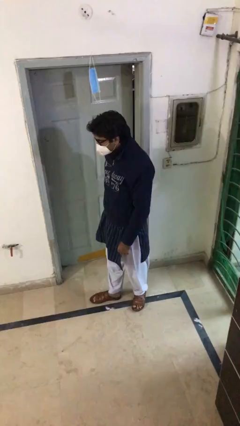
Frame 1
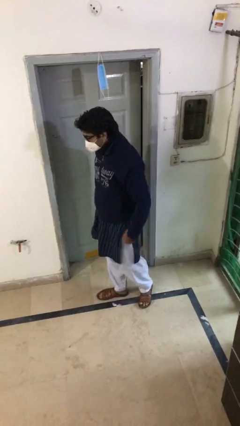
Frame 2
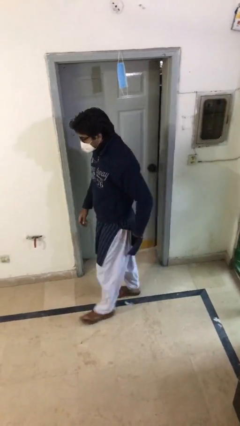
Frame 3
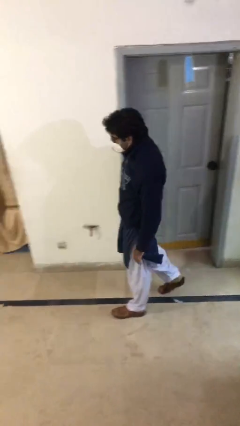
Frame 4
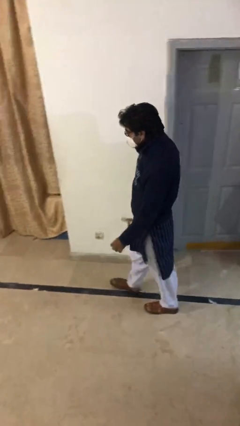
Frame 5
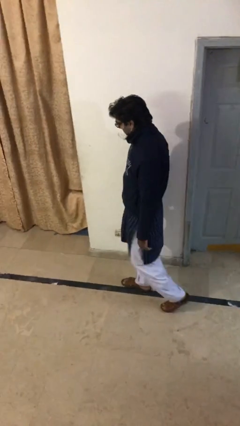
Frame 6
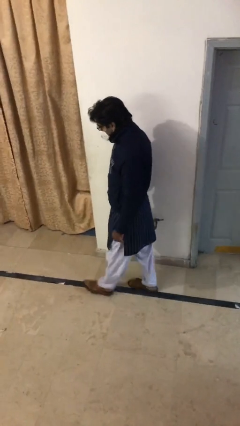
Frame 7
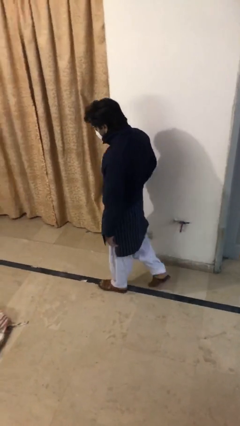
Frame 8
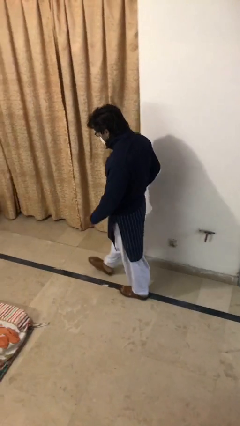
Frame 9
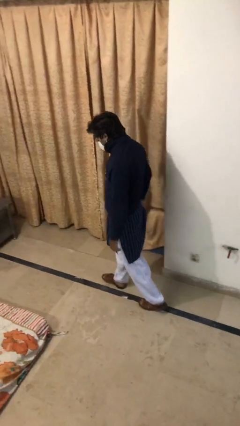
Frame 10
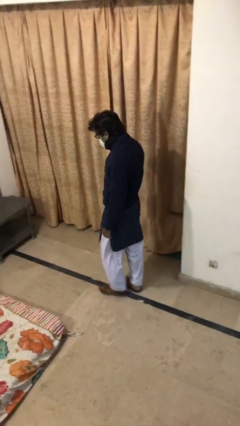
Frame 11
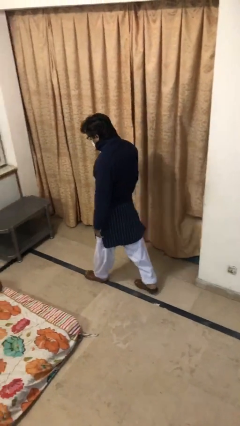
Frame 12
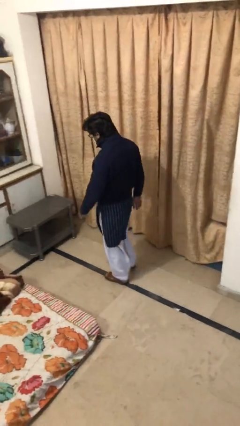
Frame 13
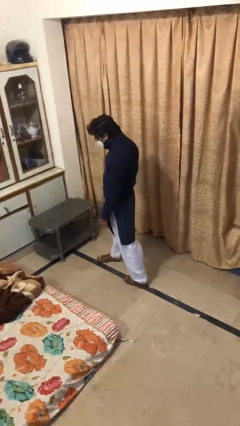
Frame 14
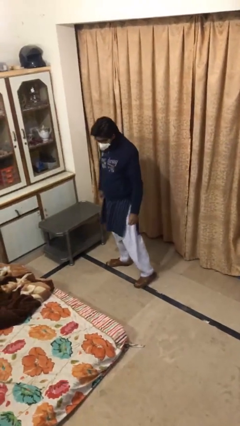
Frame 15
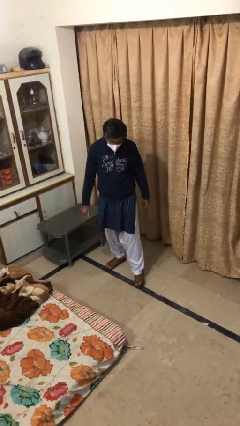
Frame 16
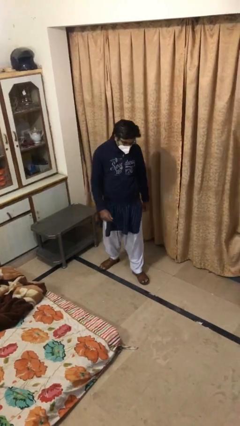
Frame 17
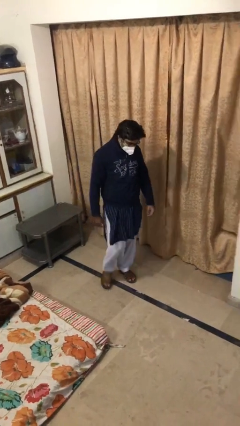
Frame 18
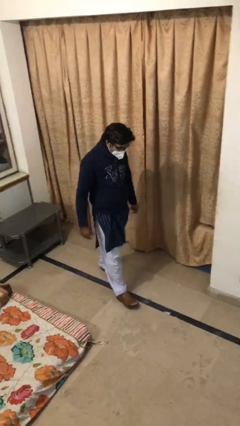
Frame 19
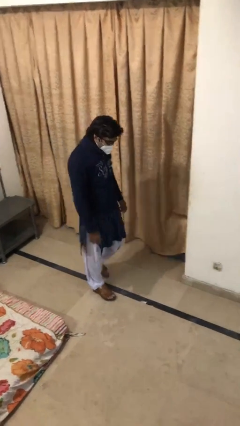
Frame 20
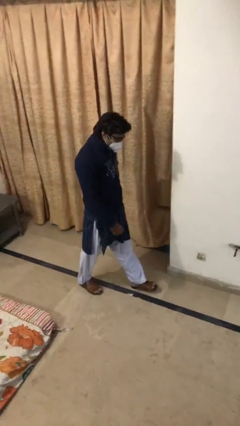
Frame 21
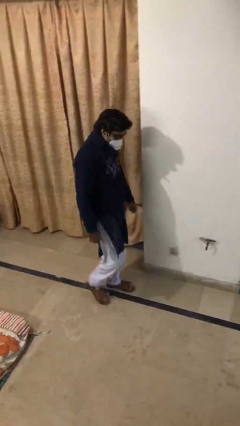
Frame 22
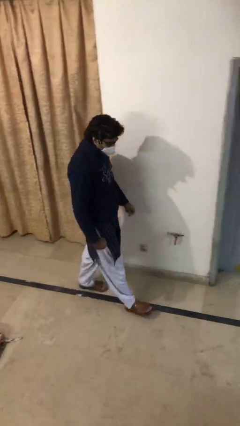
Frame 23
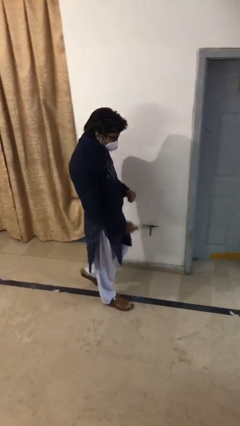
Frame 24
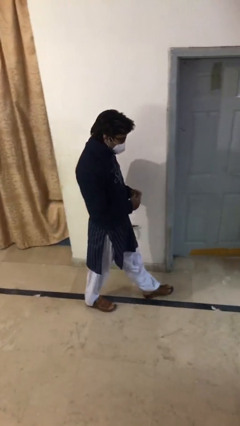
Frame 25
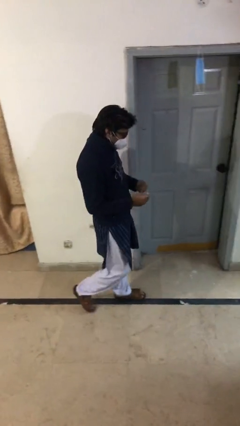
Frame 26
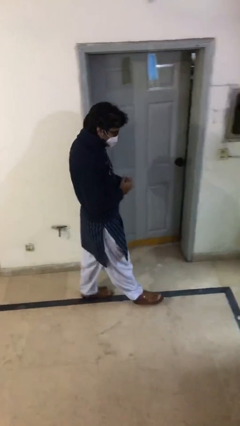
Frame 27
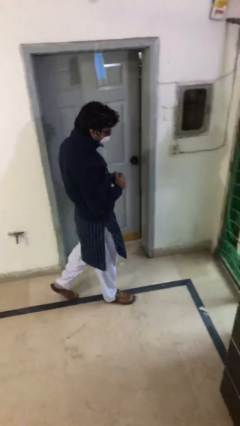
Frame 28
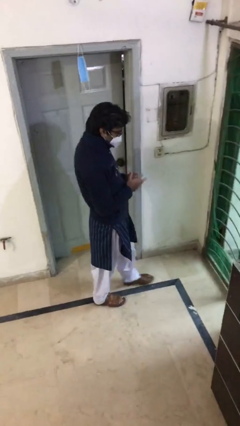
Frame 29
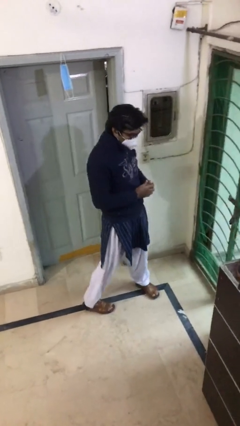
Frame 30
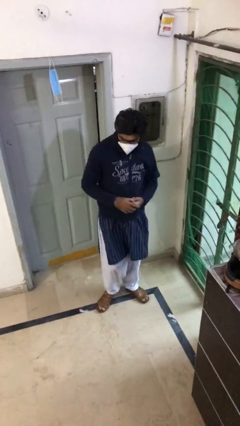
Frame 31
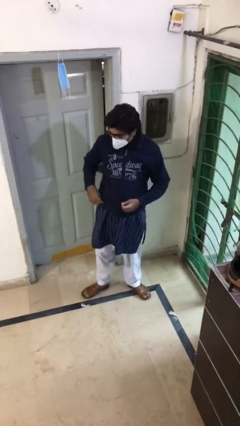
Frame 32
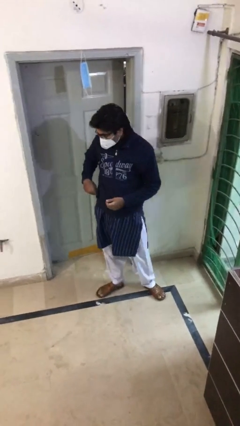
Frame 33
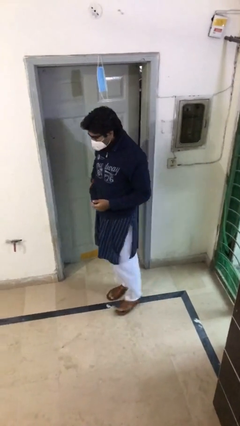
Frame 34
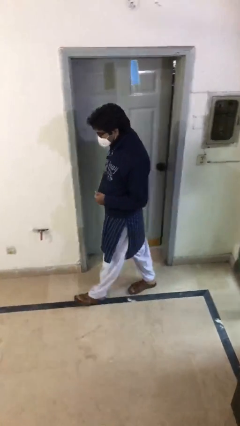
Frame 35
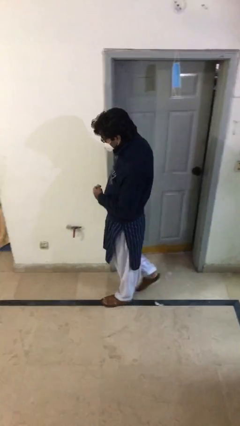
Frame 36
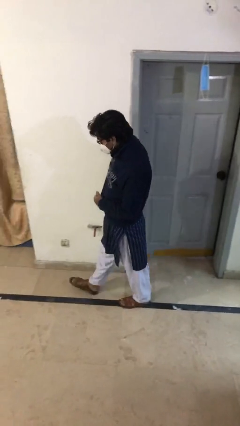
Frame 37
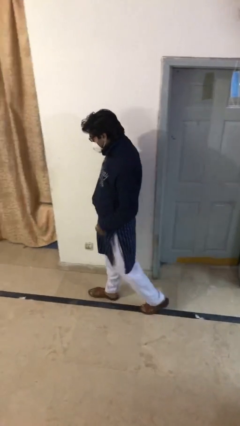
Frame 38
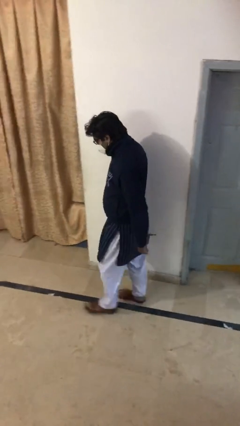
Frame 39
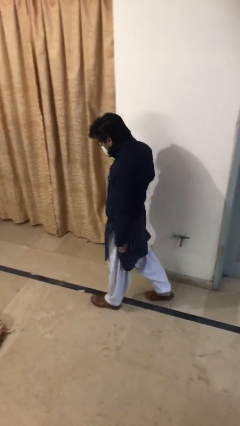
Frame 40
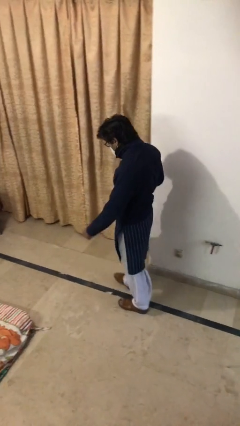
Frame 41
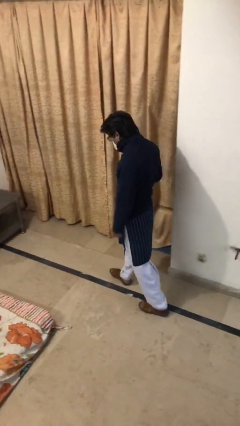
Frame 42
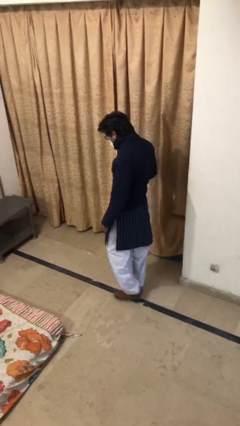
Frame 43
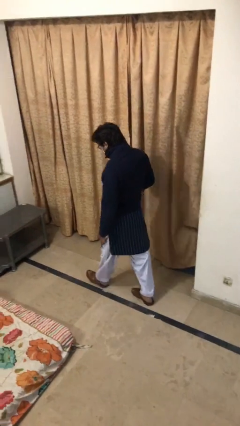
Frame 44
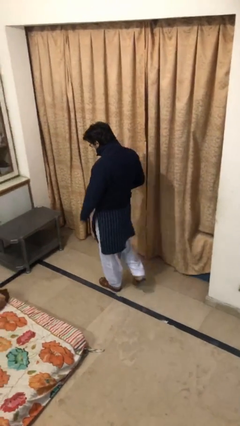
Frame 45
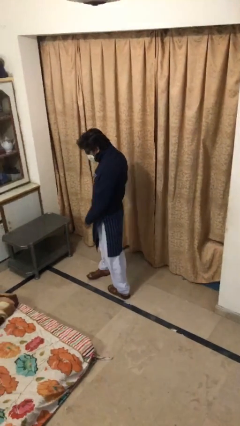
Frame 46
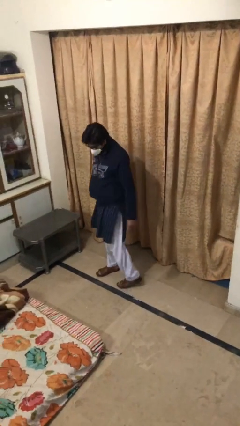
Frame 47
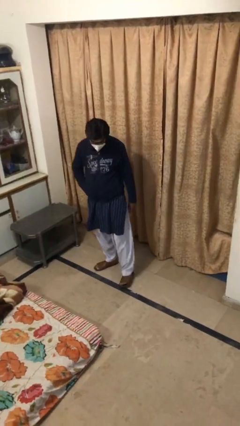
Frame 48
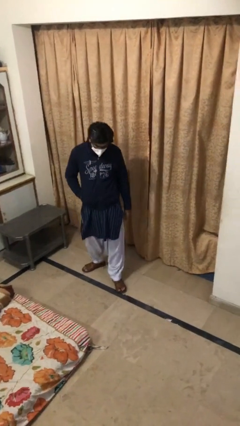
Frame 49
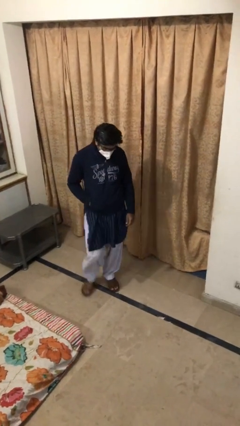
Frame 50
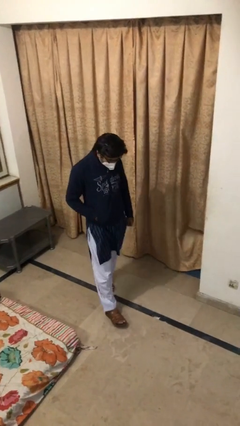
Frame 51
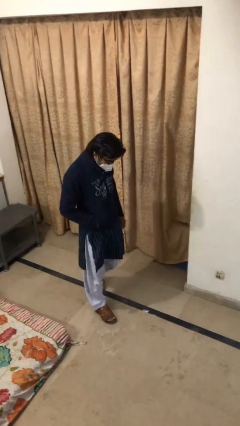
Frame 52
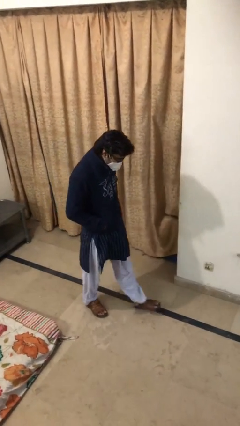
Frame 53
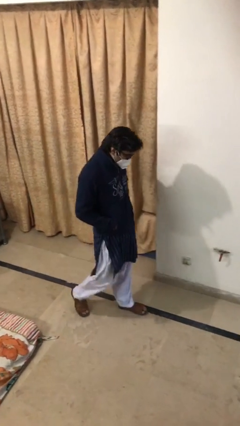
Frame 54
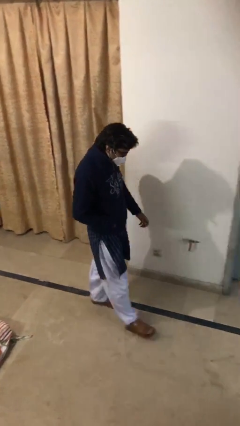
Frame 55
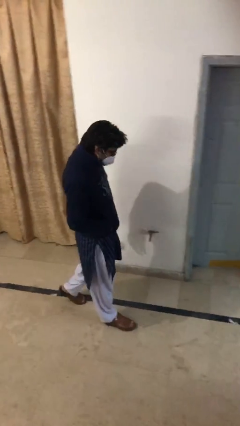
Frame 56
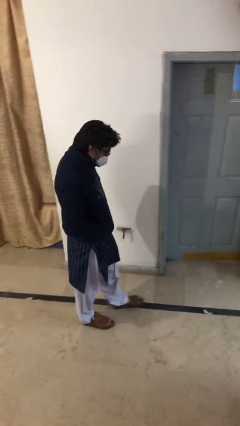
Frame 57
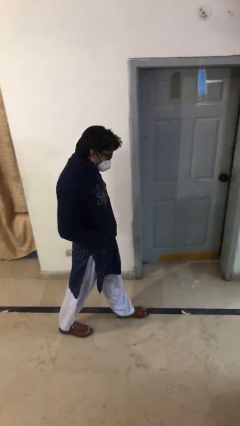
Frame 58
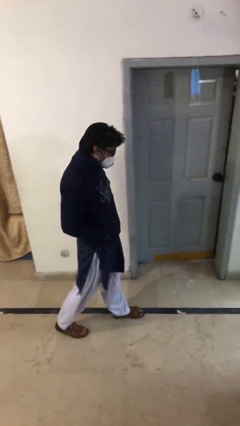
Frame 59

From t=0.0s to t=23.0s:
person walks

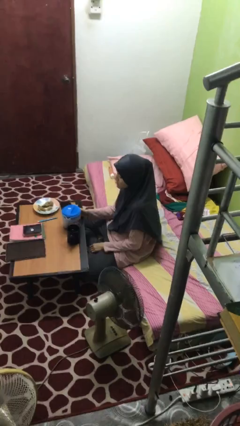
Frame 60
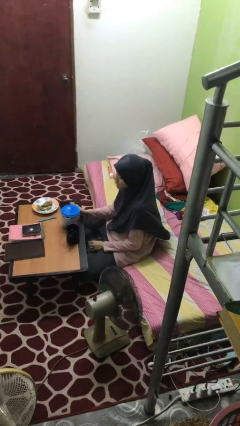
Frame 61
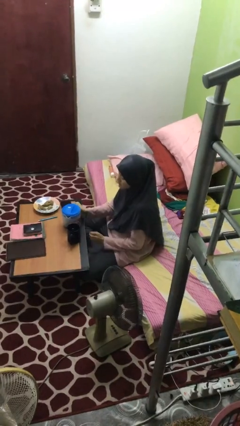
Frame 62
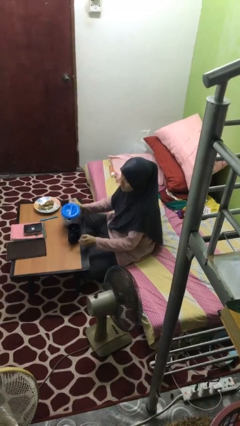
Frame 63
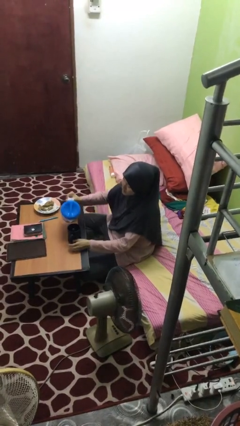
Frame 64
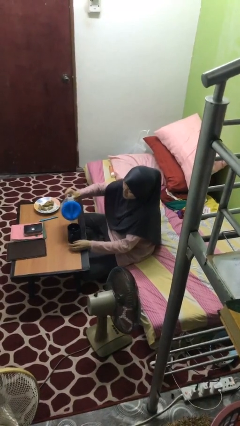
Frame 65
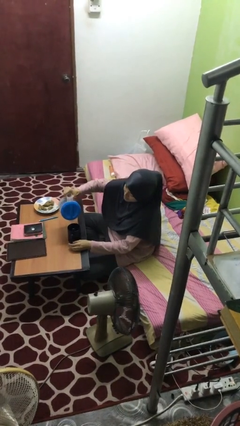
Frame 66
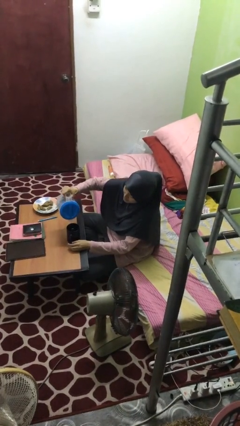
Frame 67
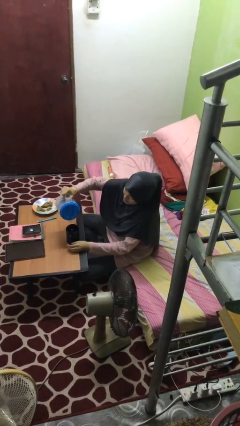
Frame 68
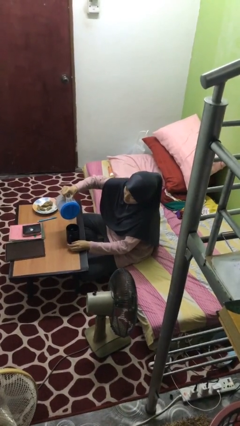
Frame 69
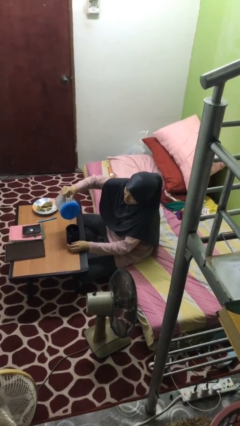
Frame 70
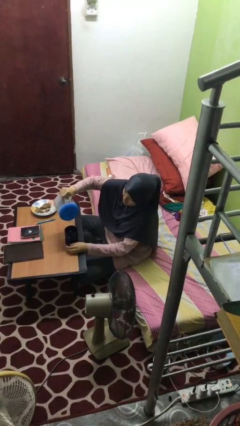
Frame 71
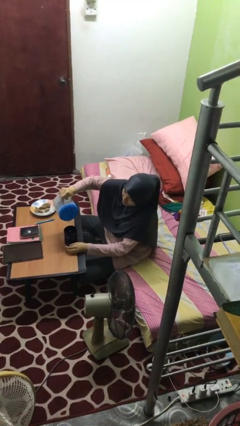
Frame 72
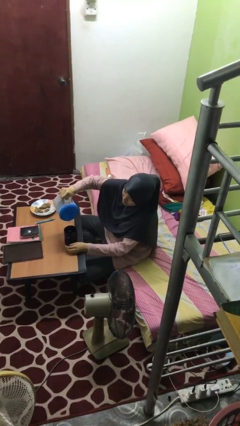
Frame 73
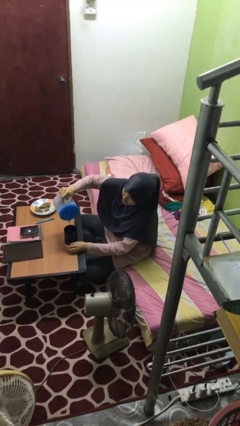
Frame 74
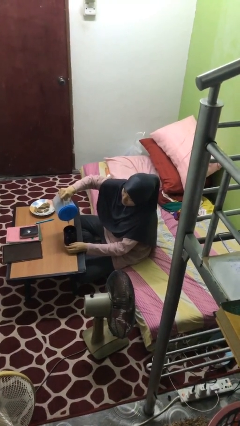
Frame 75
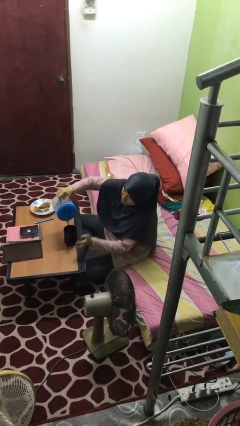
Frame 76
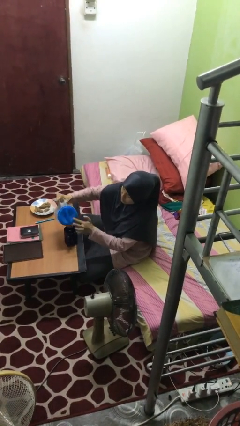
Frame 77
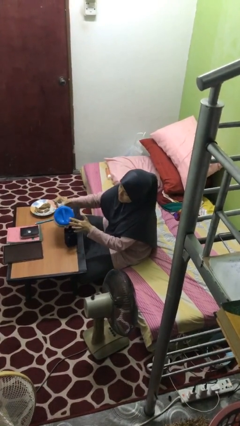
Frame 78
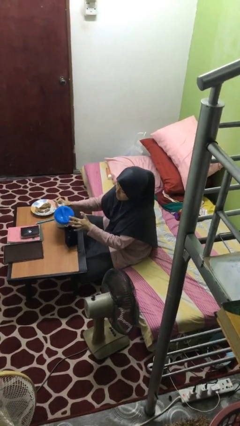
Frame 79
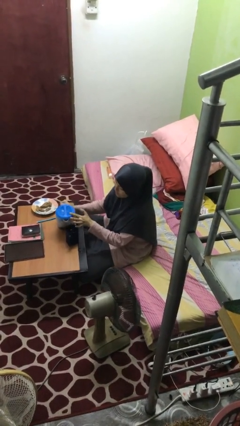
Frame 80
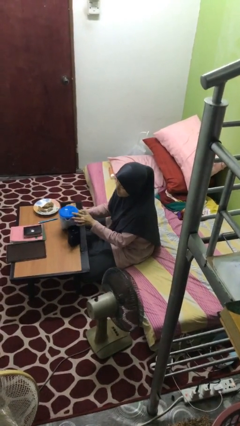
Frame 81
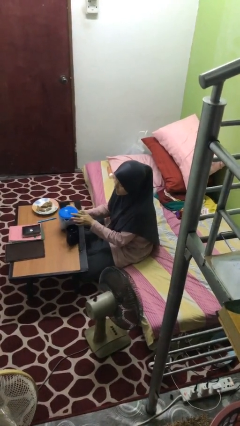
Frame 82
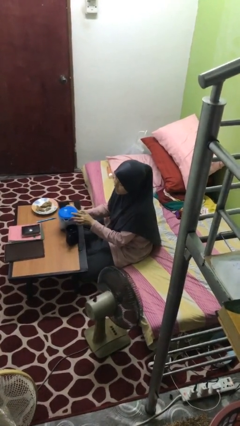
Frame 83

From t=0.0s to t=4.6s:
person pours coffee into mug

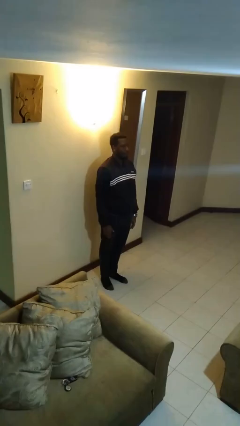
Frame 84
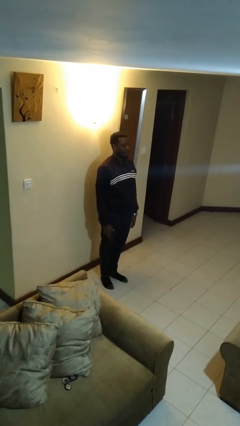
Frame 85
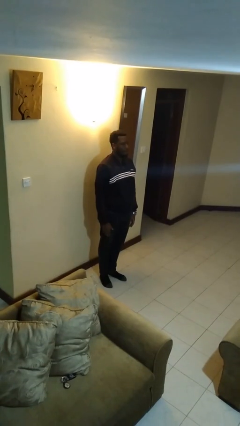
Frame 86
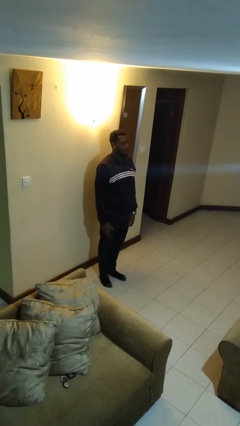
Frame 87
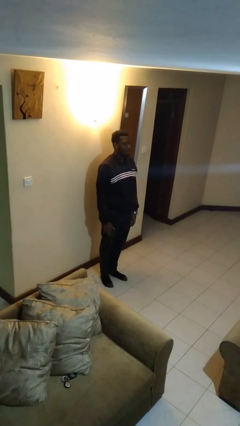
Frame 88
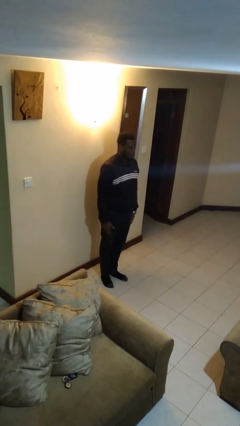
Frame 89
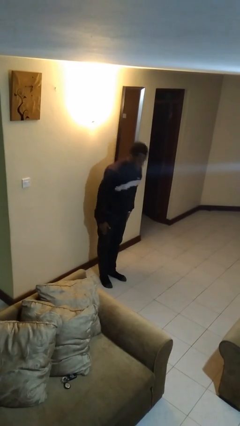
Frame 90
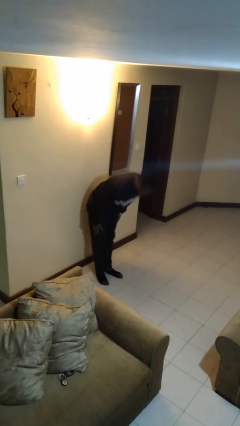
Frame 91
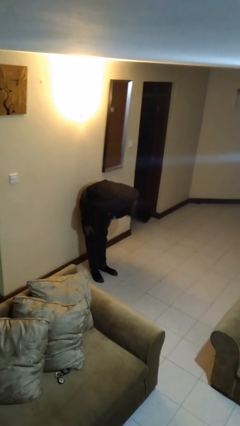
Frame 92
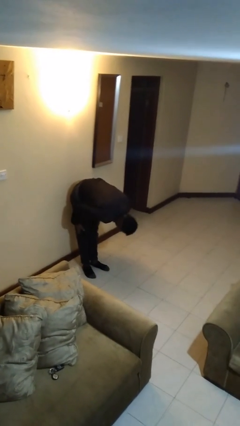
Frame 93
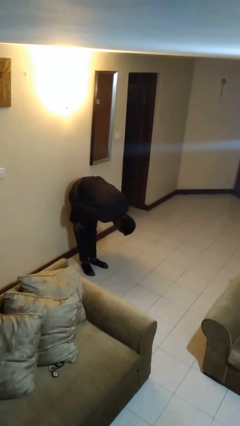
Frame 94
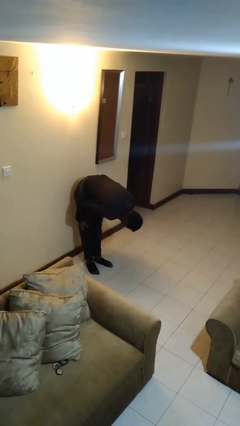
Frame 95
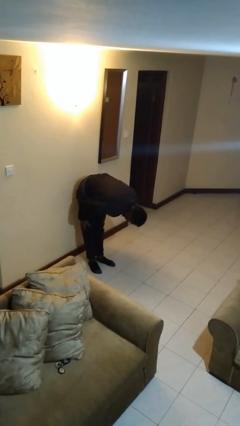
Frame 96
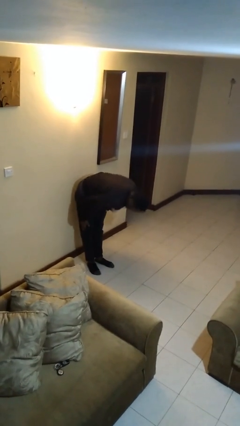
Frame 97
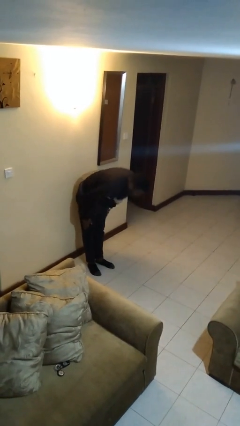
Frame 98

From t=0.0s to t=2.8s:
person bows
